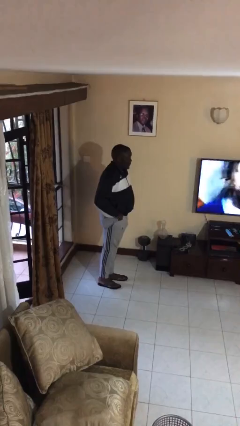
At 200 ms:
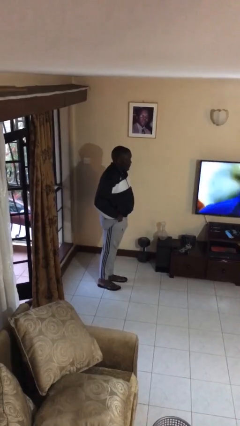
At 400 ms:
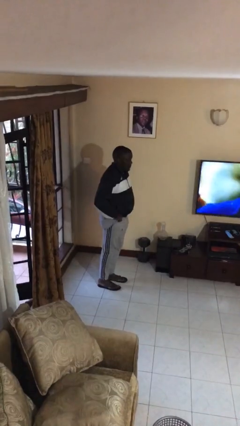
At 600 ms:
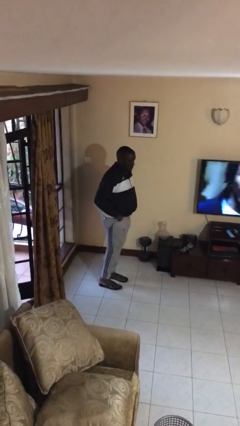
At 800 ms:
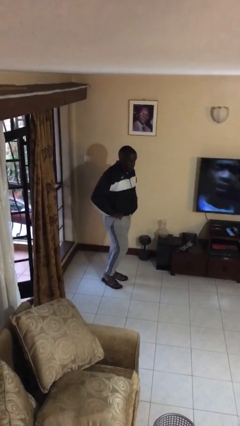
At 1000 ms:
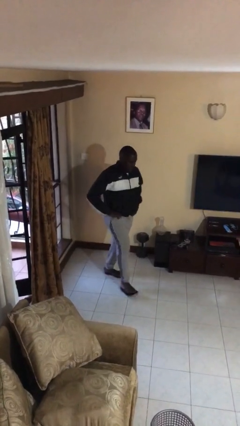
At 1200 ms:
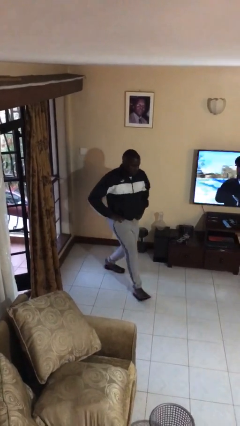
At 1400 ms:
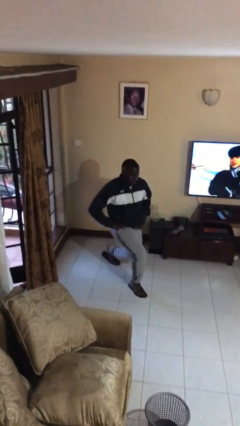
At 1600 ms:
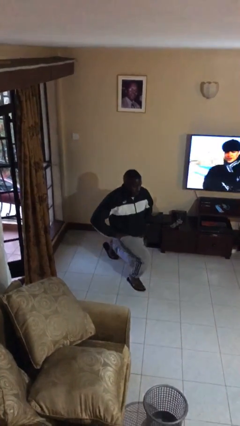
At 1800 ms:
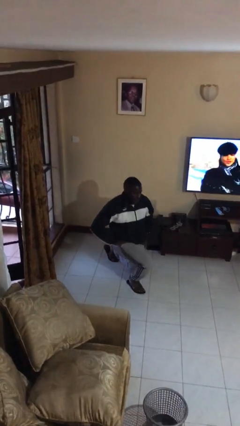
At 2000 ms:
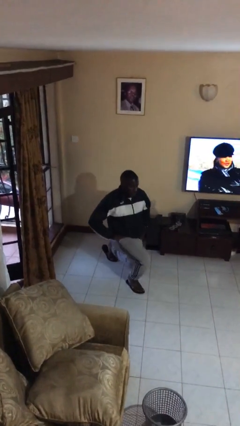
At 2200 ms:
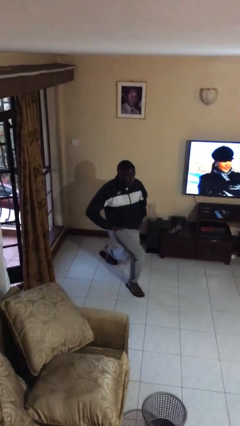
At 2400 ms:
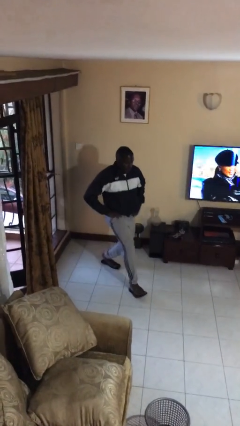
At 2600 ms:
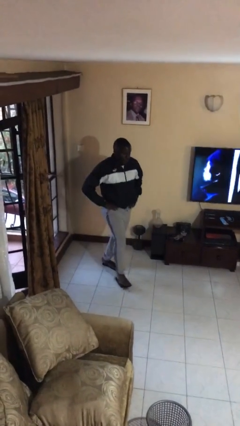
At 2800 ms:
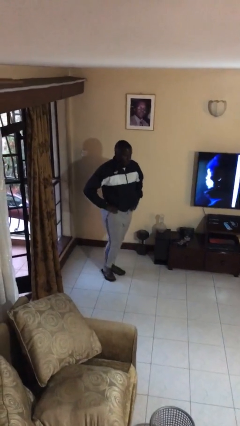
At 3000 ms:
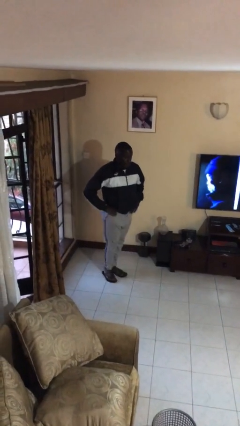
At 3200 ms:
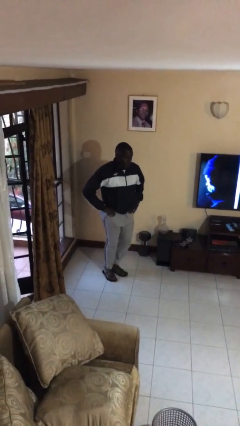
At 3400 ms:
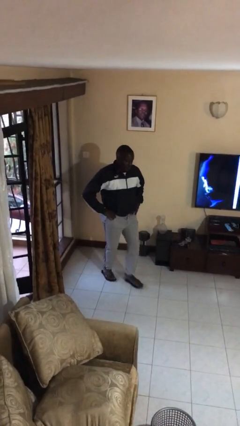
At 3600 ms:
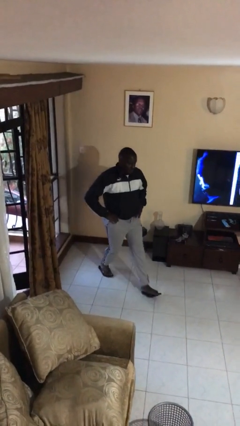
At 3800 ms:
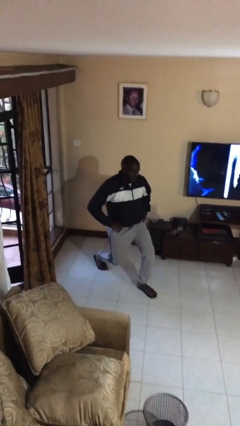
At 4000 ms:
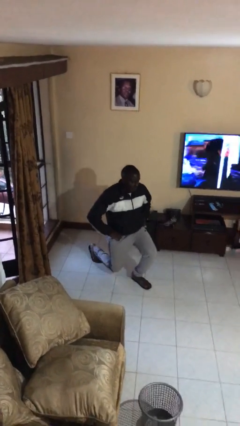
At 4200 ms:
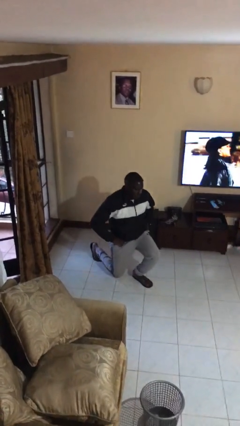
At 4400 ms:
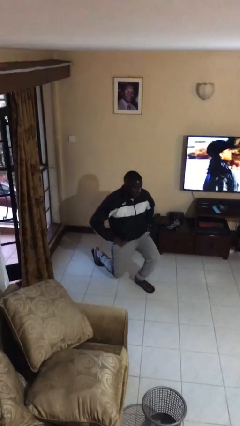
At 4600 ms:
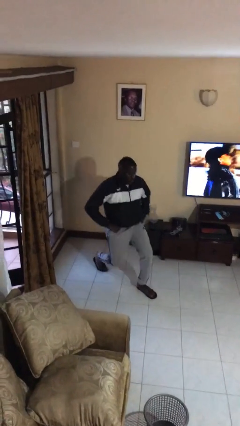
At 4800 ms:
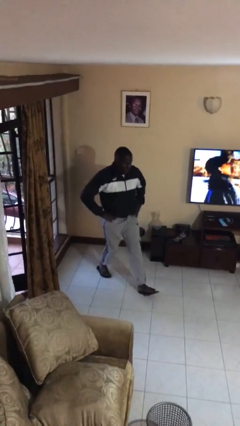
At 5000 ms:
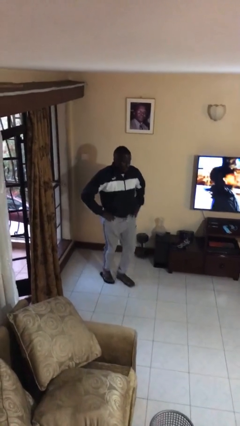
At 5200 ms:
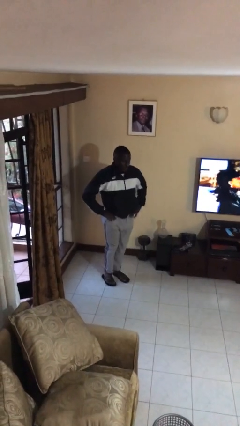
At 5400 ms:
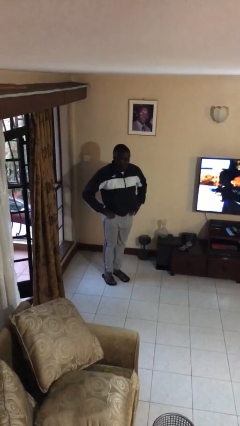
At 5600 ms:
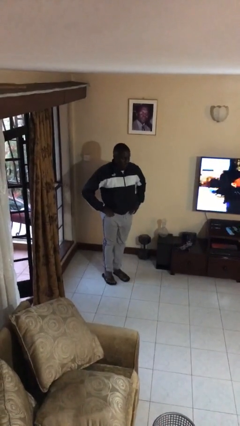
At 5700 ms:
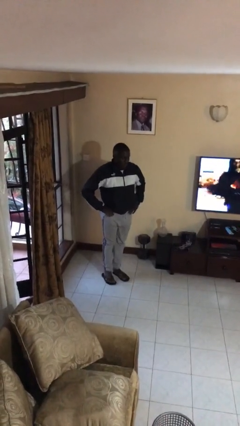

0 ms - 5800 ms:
person exercises with lunges

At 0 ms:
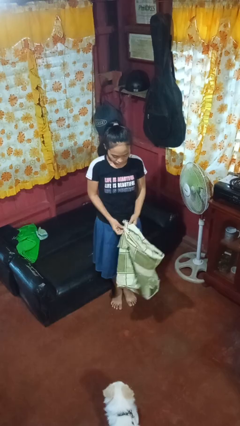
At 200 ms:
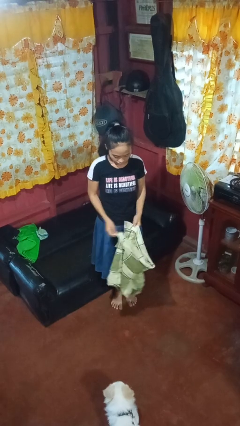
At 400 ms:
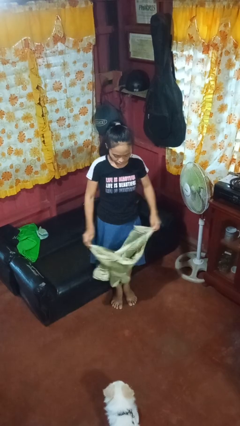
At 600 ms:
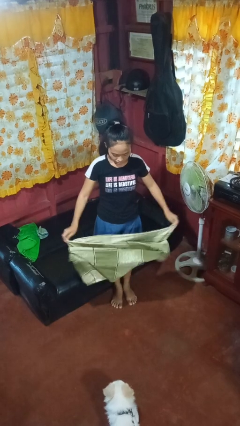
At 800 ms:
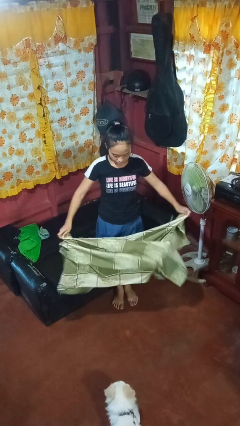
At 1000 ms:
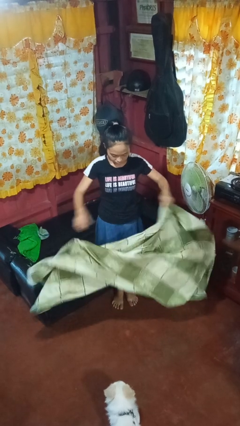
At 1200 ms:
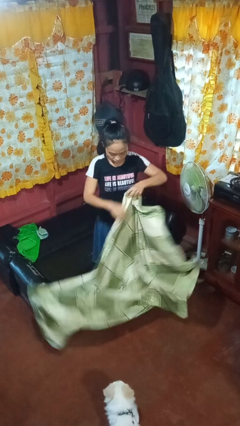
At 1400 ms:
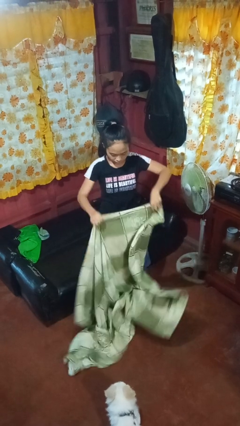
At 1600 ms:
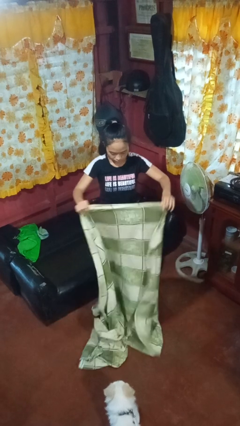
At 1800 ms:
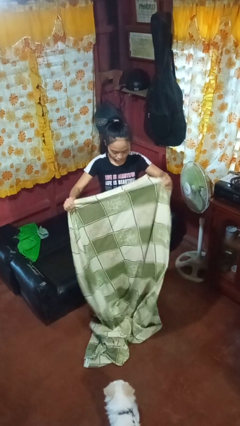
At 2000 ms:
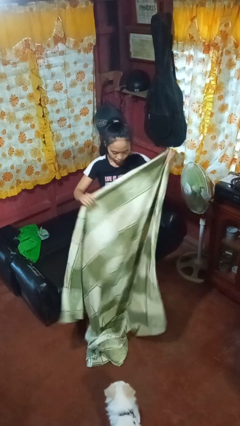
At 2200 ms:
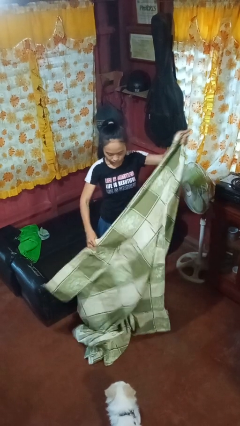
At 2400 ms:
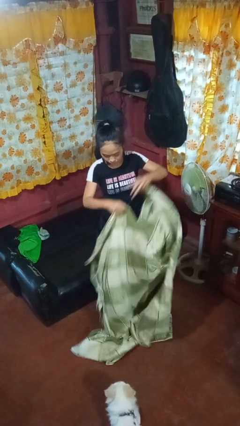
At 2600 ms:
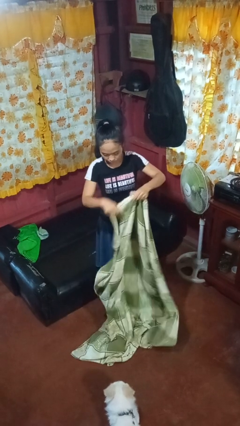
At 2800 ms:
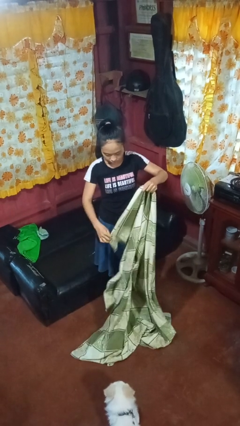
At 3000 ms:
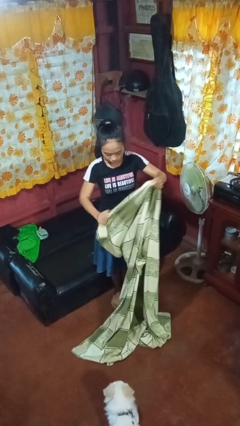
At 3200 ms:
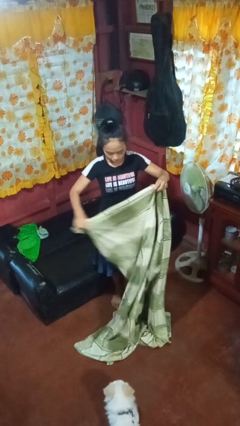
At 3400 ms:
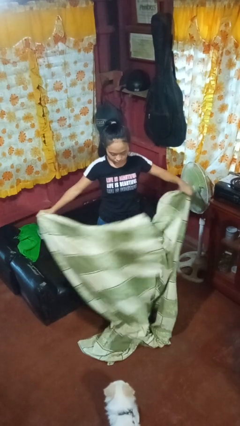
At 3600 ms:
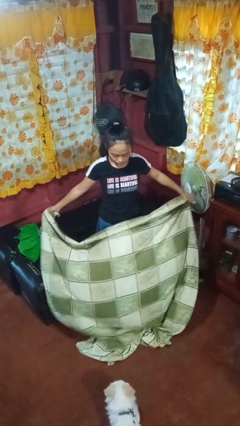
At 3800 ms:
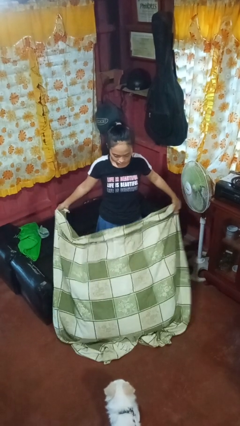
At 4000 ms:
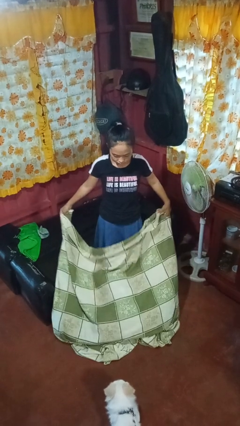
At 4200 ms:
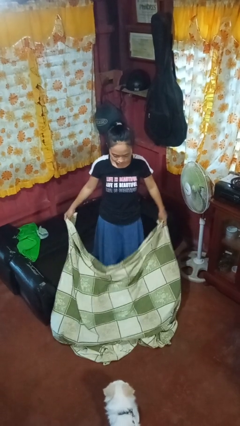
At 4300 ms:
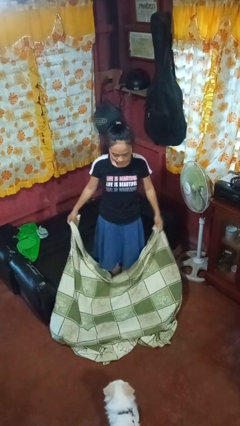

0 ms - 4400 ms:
person unfolds blanket

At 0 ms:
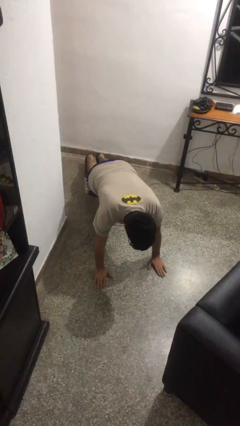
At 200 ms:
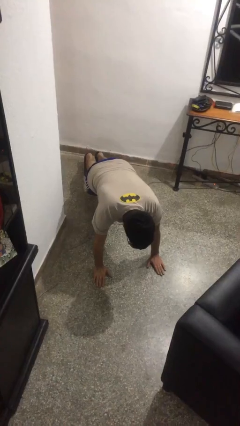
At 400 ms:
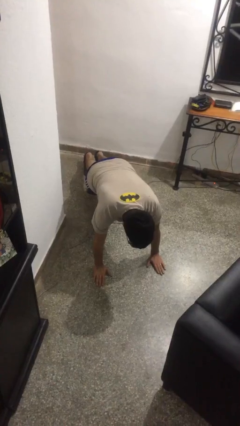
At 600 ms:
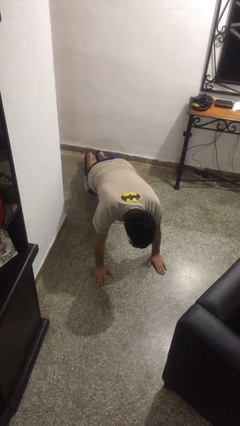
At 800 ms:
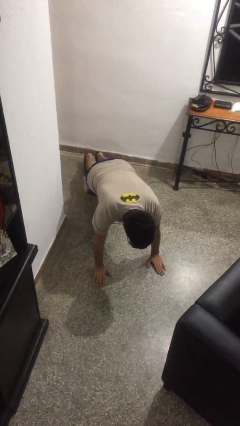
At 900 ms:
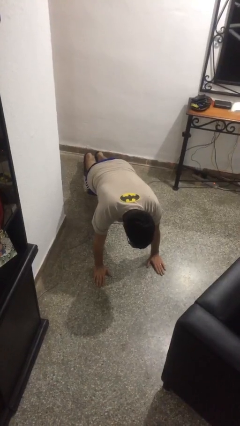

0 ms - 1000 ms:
person exercises with pushup

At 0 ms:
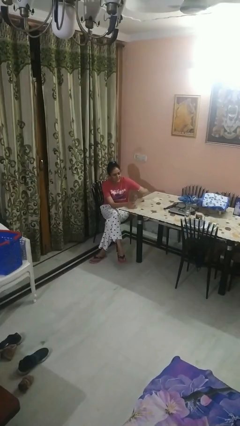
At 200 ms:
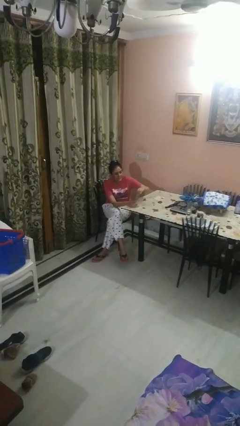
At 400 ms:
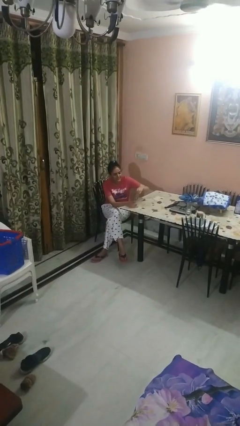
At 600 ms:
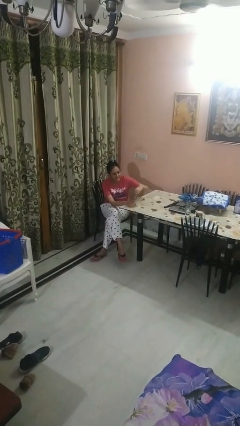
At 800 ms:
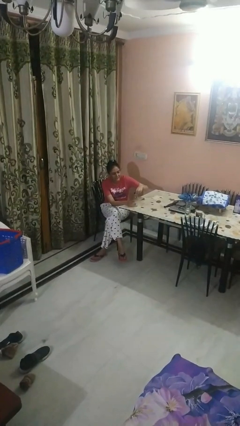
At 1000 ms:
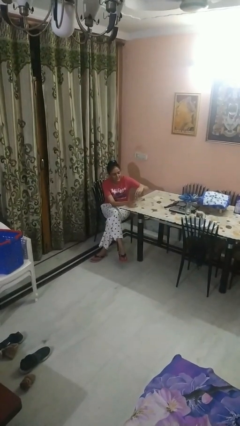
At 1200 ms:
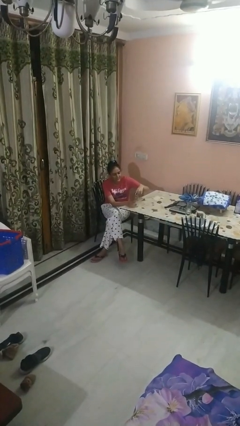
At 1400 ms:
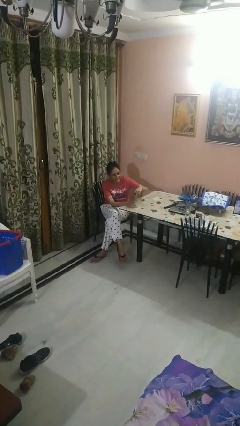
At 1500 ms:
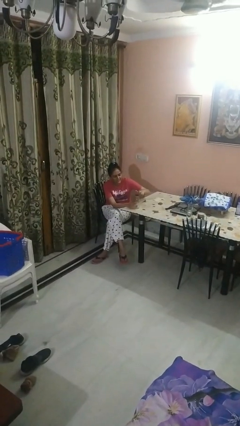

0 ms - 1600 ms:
person screws lid to bottle

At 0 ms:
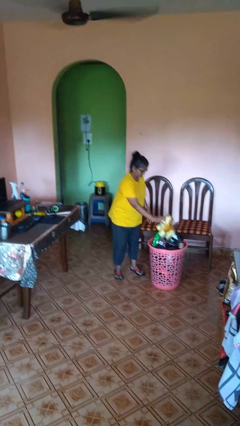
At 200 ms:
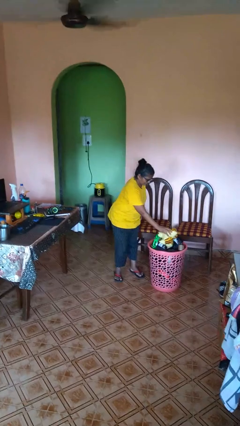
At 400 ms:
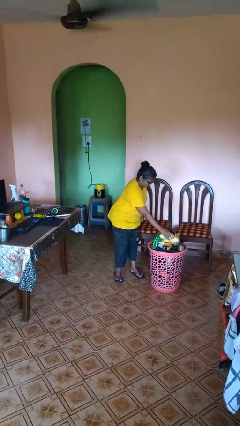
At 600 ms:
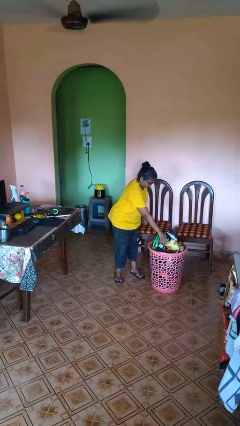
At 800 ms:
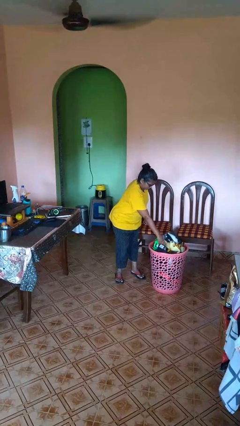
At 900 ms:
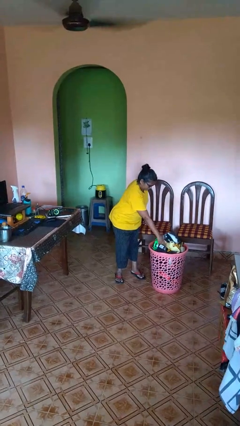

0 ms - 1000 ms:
person puts object into basket

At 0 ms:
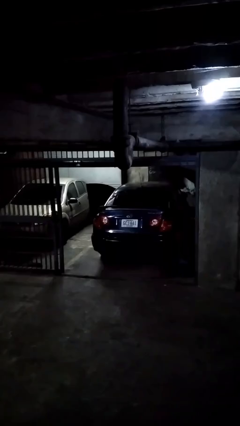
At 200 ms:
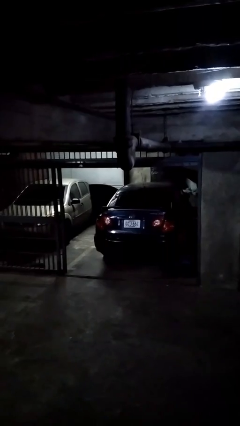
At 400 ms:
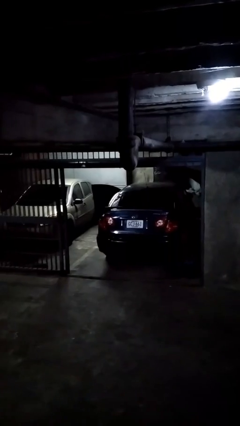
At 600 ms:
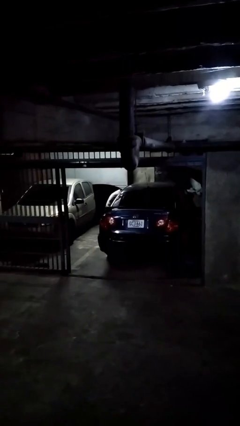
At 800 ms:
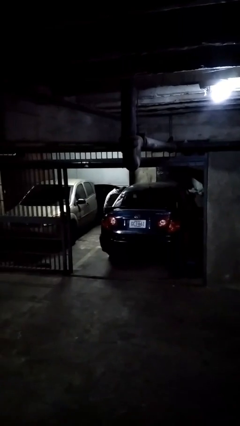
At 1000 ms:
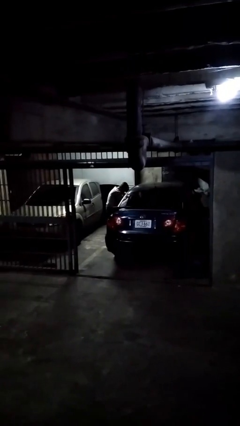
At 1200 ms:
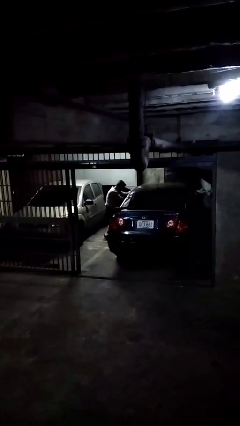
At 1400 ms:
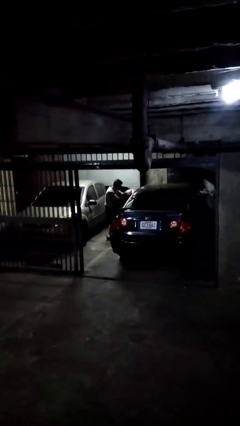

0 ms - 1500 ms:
person unloads car

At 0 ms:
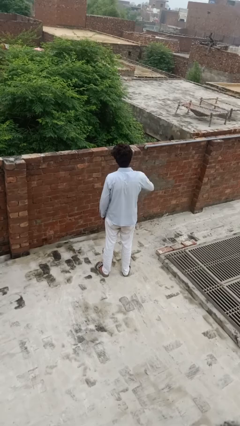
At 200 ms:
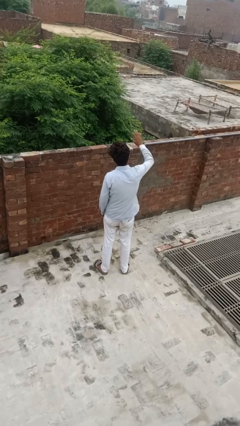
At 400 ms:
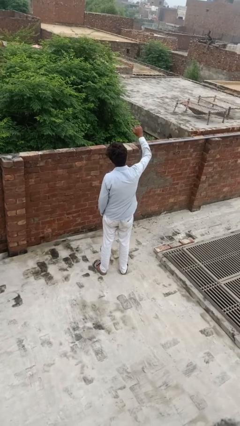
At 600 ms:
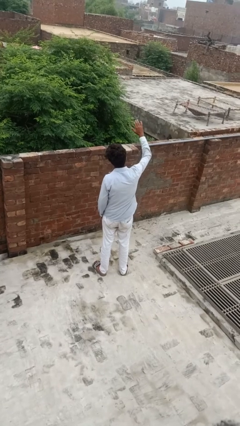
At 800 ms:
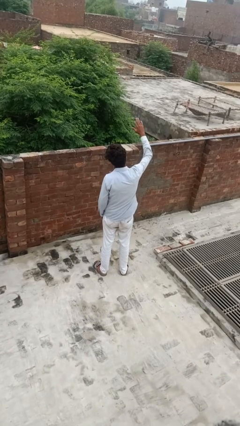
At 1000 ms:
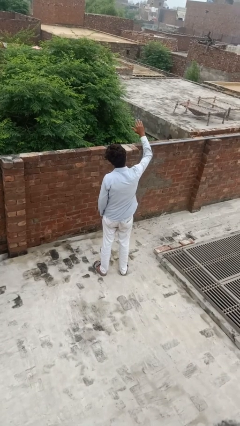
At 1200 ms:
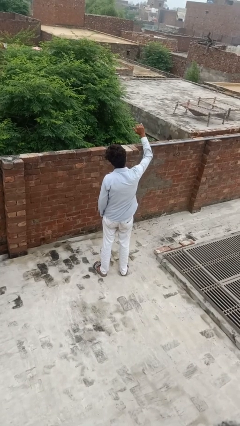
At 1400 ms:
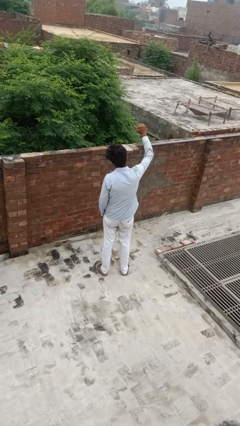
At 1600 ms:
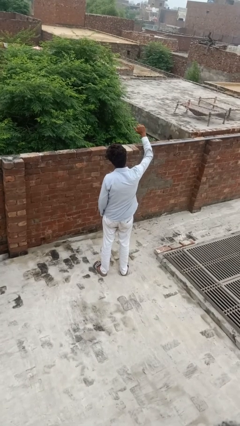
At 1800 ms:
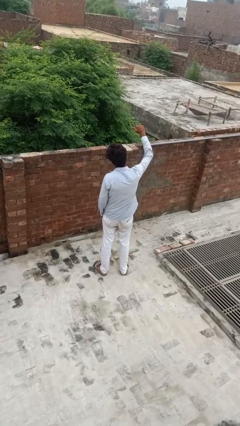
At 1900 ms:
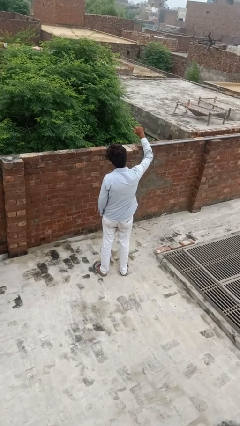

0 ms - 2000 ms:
person gestures come here

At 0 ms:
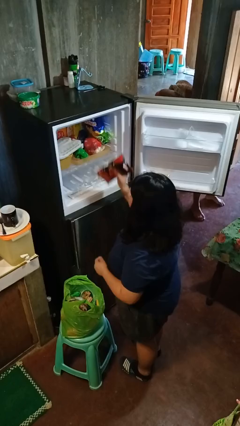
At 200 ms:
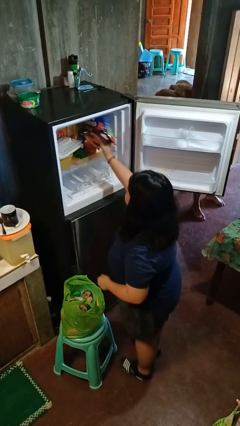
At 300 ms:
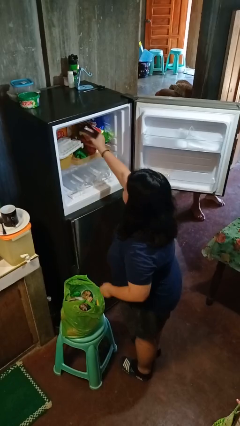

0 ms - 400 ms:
person loads groceries into refrigerator
